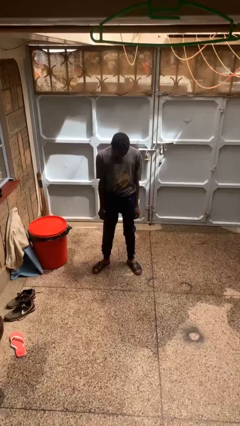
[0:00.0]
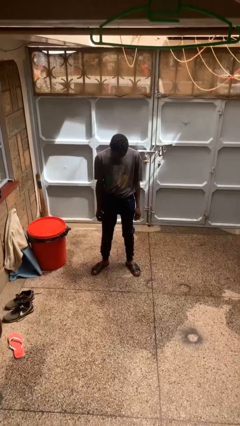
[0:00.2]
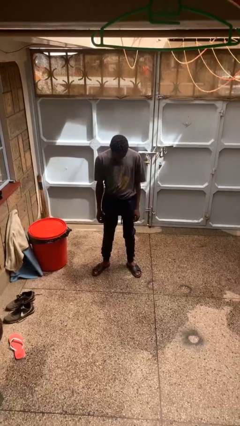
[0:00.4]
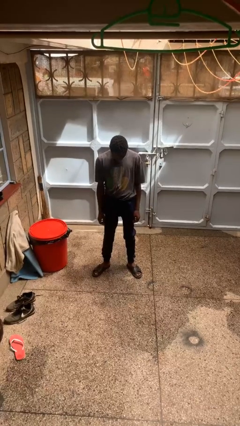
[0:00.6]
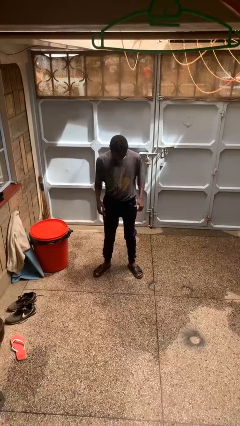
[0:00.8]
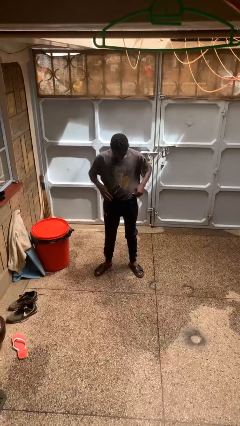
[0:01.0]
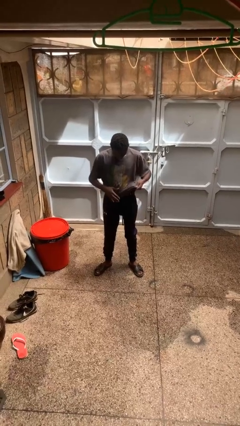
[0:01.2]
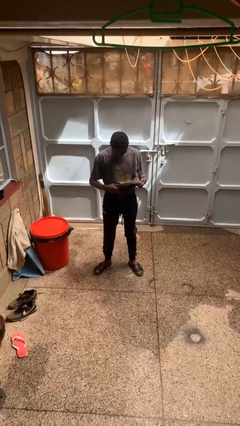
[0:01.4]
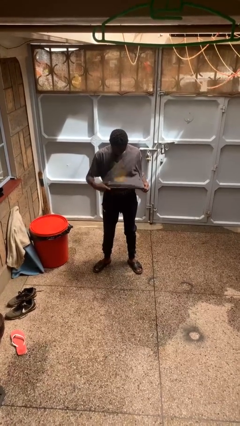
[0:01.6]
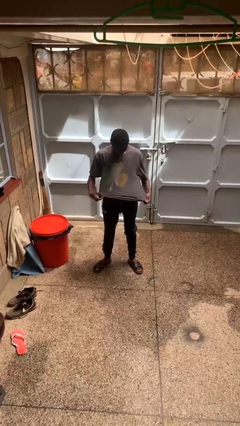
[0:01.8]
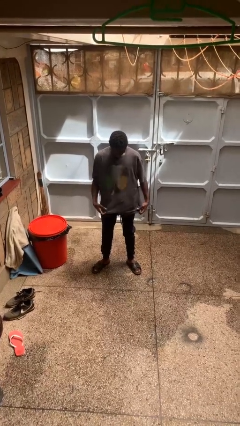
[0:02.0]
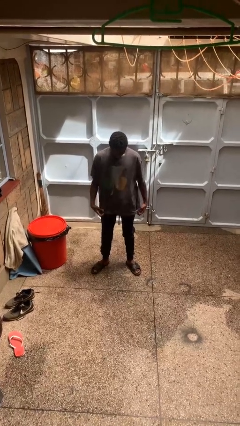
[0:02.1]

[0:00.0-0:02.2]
person untucks shirt

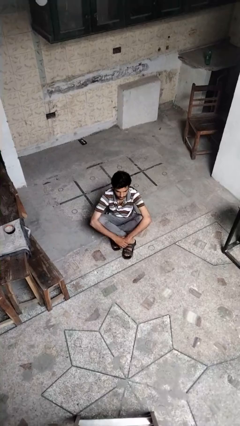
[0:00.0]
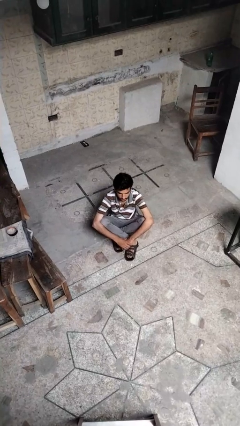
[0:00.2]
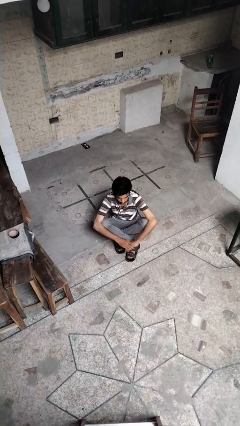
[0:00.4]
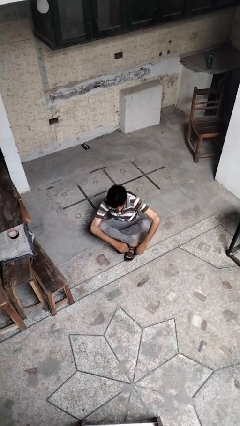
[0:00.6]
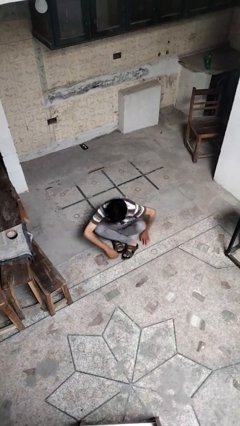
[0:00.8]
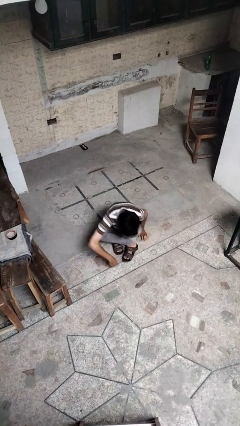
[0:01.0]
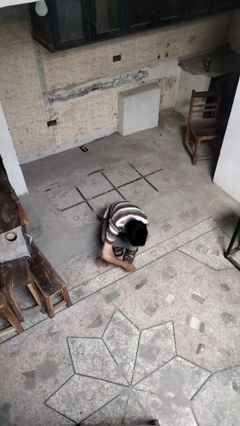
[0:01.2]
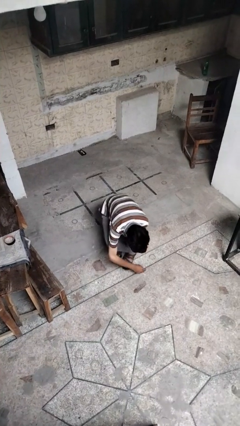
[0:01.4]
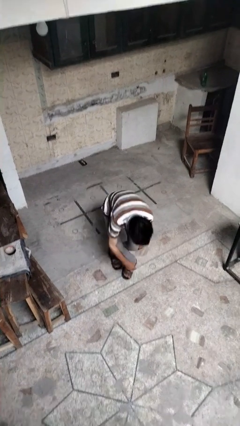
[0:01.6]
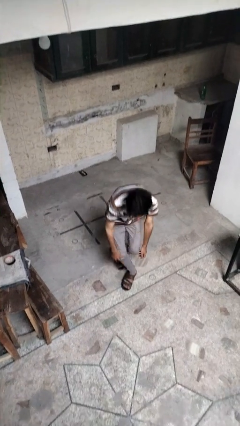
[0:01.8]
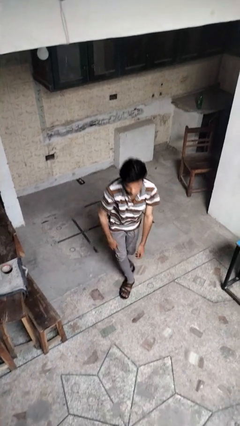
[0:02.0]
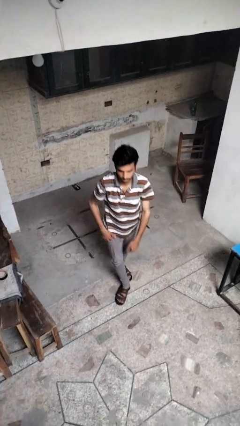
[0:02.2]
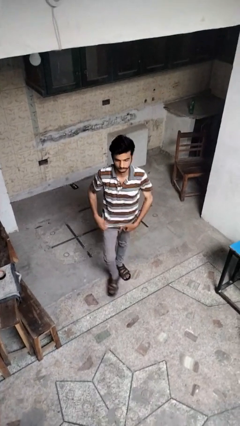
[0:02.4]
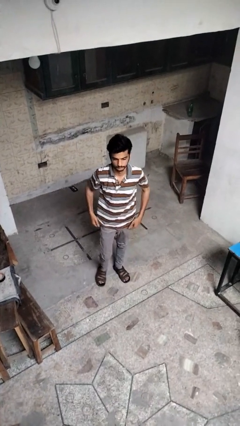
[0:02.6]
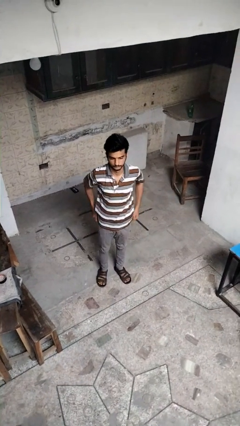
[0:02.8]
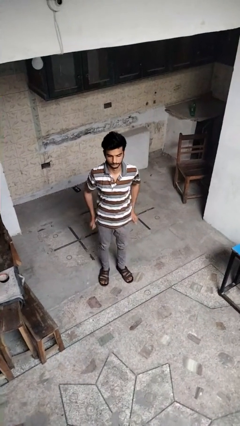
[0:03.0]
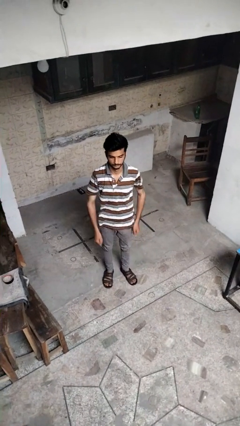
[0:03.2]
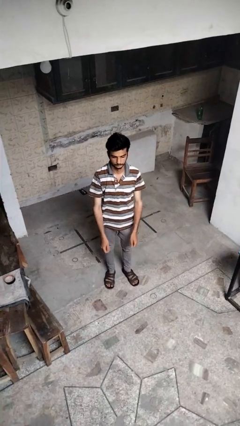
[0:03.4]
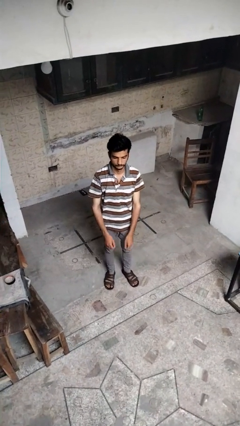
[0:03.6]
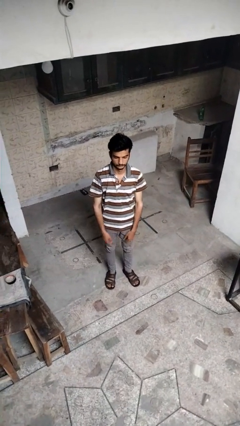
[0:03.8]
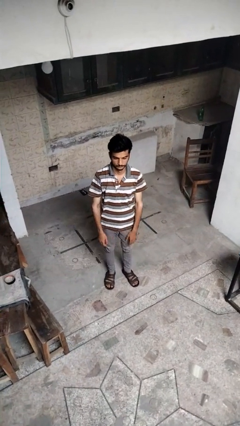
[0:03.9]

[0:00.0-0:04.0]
person stands up from floor

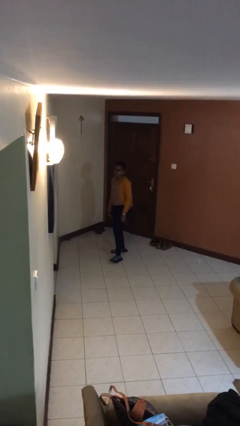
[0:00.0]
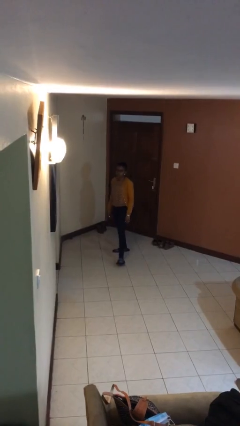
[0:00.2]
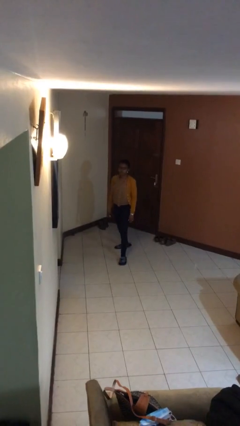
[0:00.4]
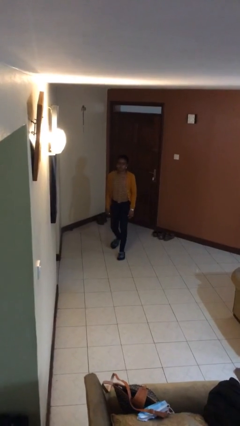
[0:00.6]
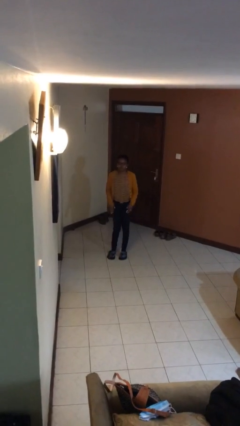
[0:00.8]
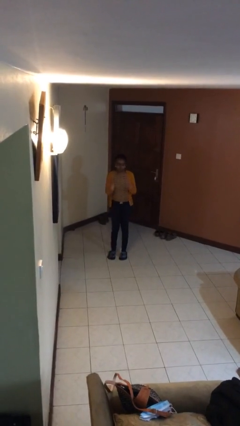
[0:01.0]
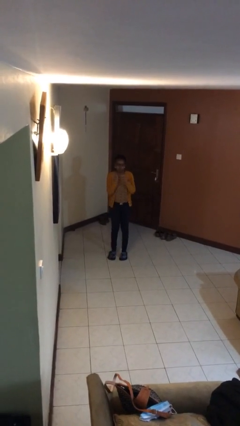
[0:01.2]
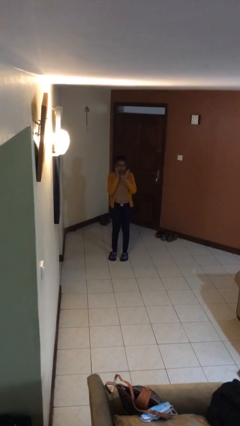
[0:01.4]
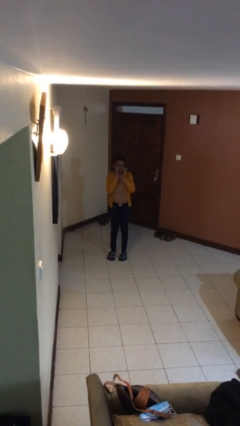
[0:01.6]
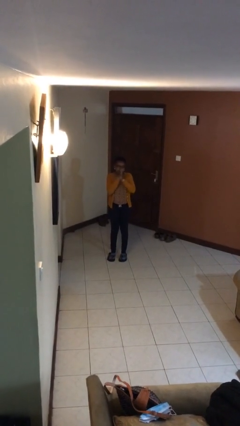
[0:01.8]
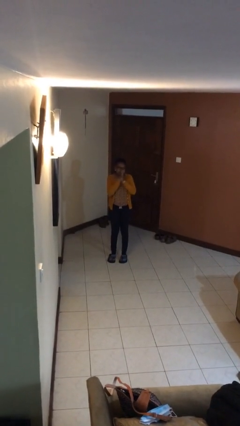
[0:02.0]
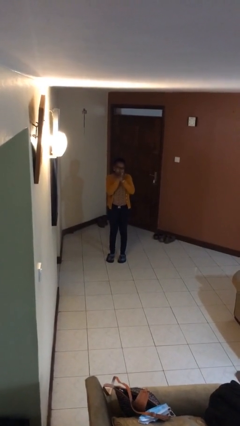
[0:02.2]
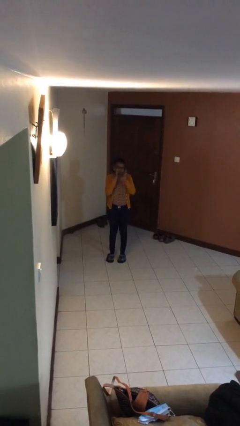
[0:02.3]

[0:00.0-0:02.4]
person claps hands

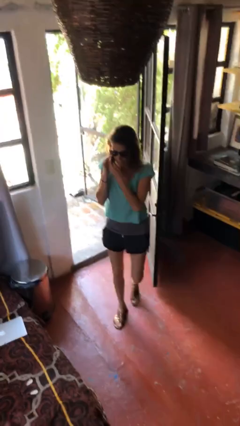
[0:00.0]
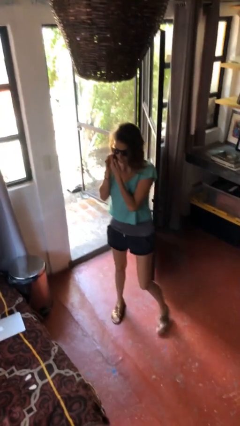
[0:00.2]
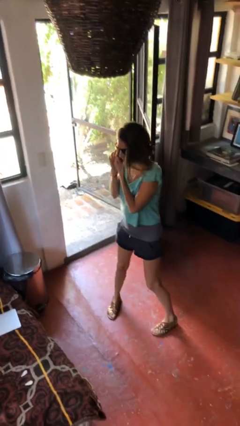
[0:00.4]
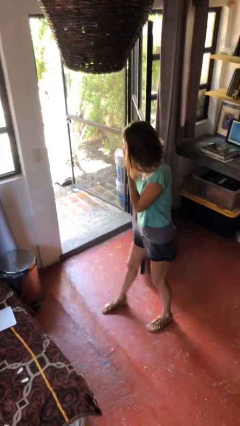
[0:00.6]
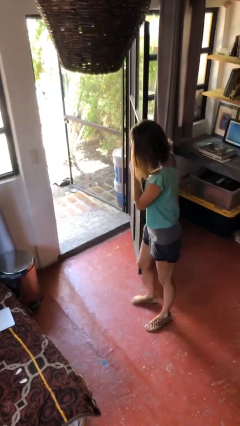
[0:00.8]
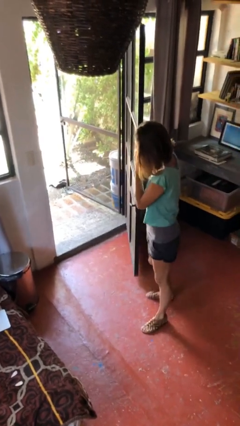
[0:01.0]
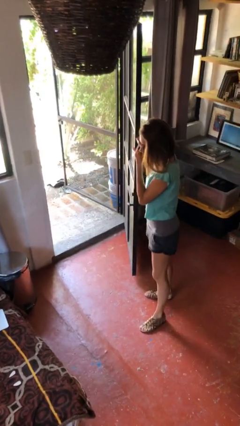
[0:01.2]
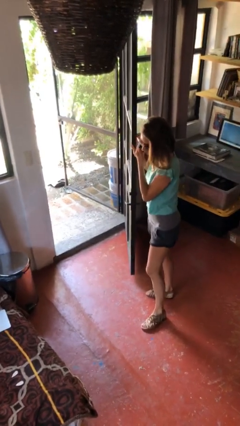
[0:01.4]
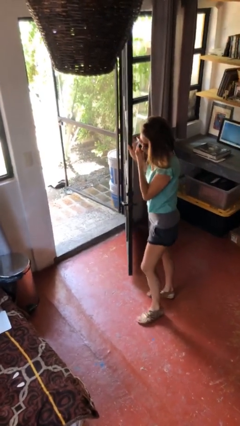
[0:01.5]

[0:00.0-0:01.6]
person closes facility door

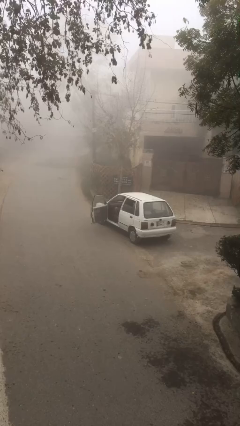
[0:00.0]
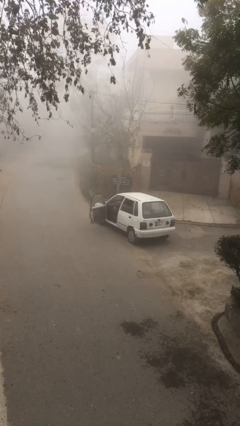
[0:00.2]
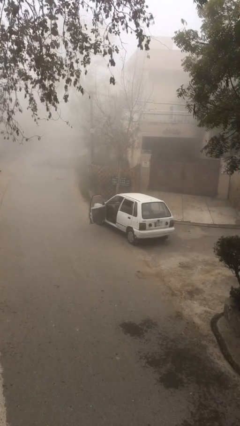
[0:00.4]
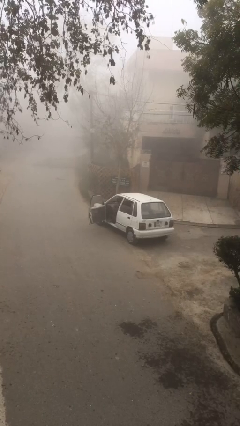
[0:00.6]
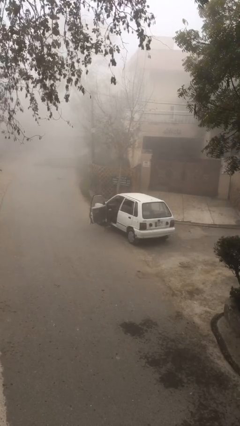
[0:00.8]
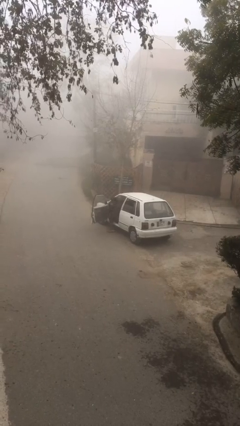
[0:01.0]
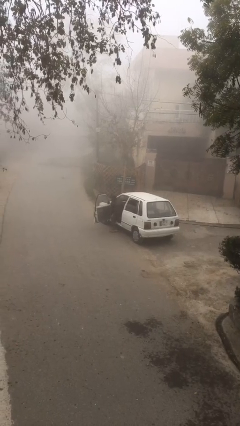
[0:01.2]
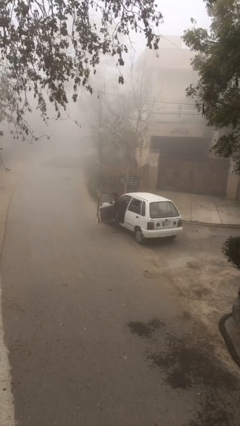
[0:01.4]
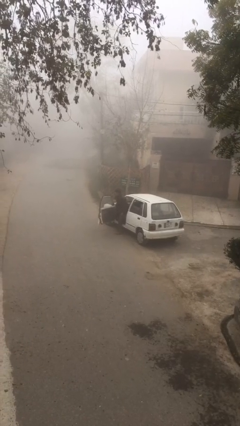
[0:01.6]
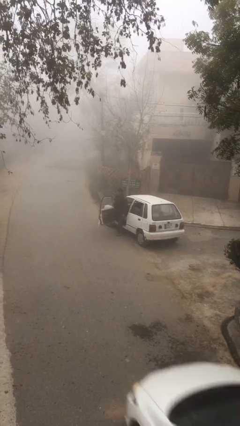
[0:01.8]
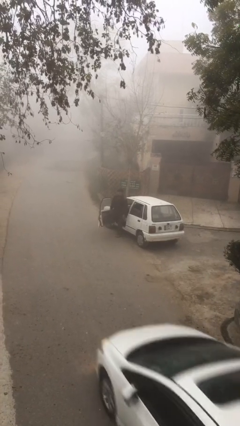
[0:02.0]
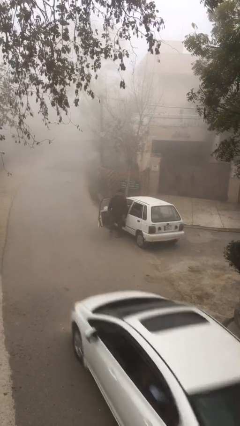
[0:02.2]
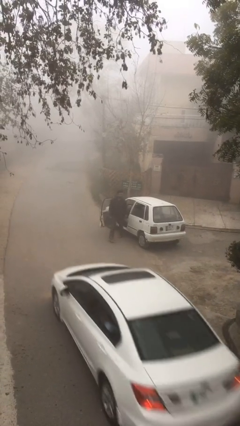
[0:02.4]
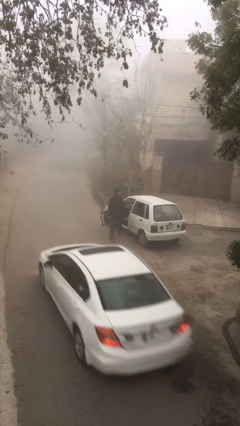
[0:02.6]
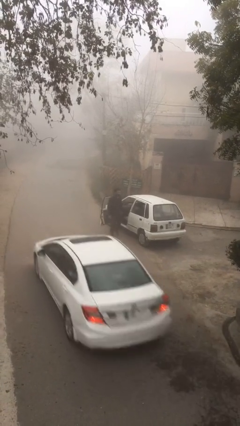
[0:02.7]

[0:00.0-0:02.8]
person exits car

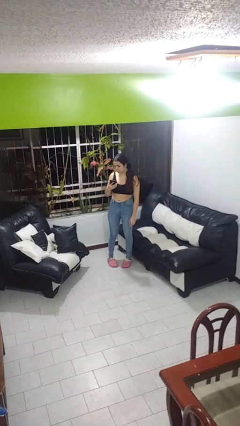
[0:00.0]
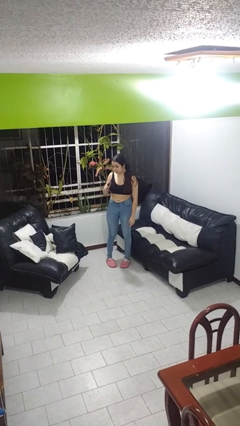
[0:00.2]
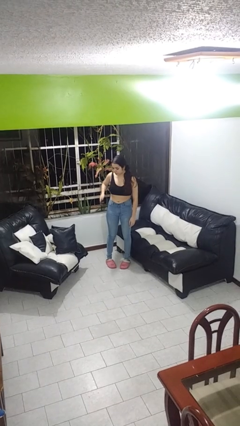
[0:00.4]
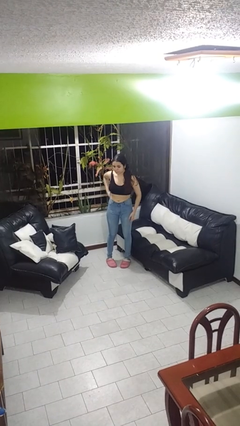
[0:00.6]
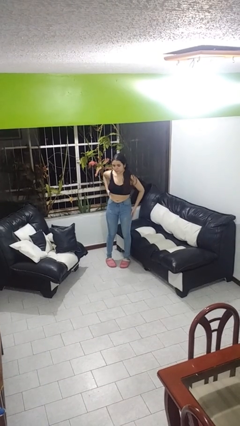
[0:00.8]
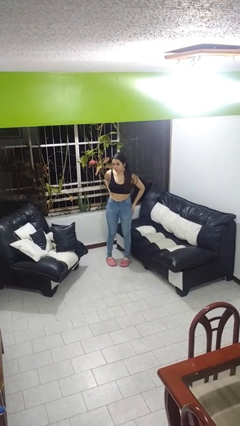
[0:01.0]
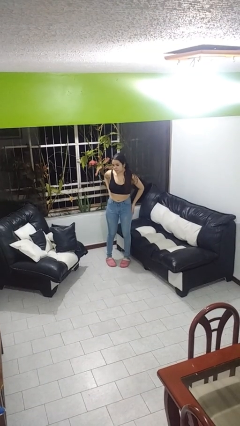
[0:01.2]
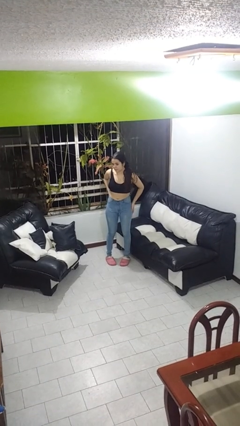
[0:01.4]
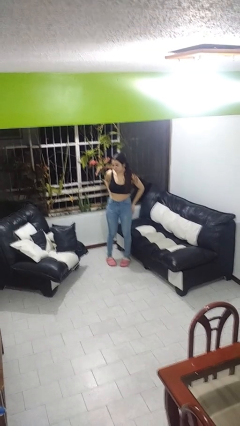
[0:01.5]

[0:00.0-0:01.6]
person puts phone into pocket

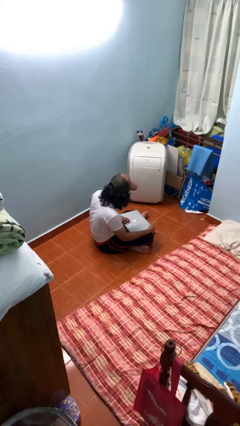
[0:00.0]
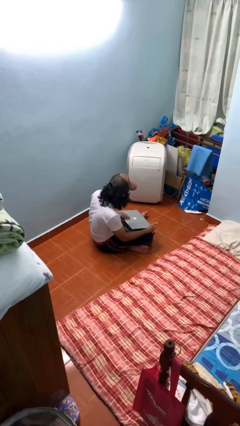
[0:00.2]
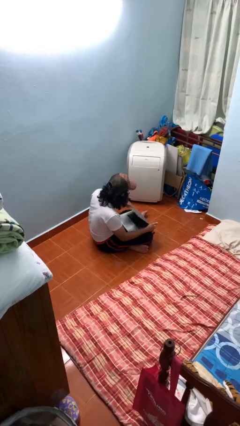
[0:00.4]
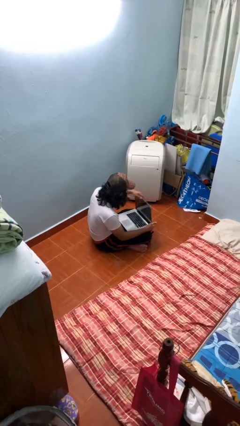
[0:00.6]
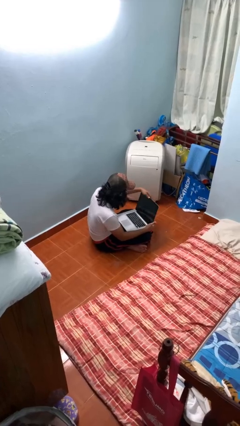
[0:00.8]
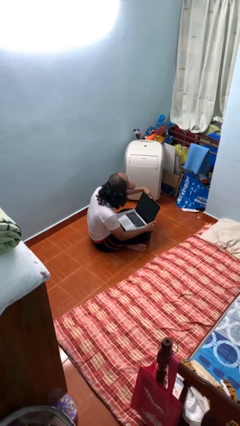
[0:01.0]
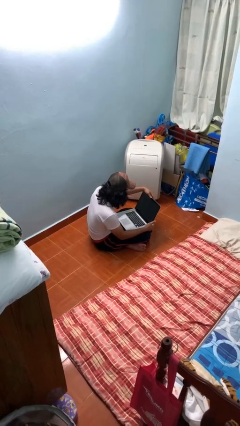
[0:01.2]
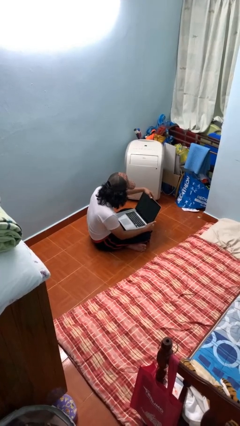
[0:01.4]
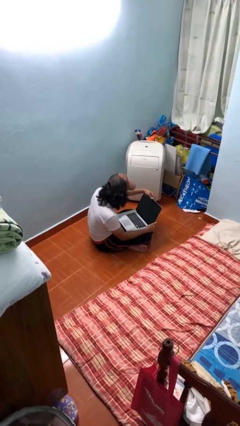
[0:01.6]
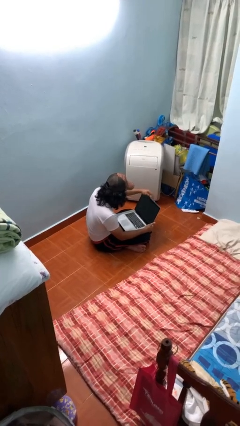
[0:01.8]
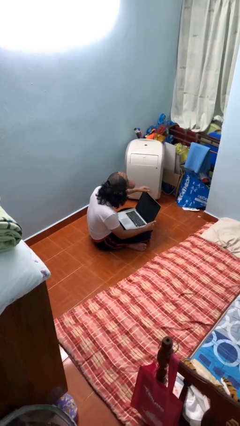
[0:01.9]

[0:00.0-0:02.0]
person opens laptop

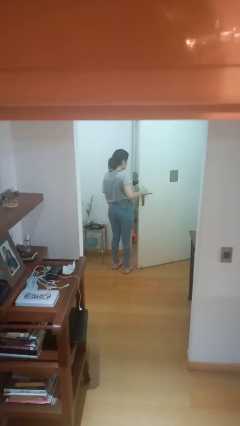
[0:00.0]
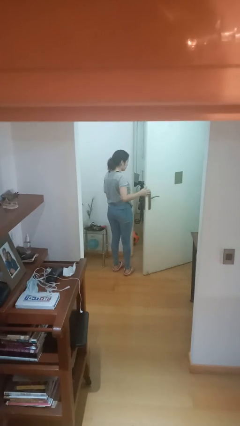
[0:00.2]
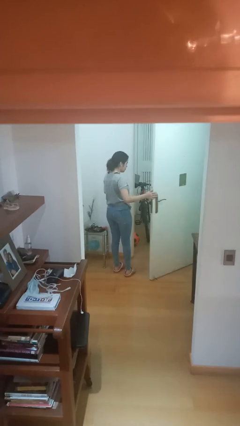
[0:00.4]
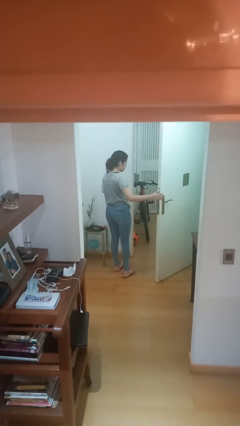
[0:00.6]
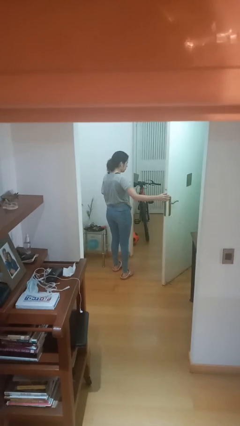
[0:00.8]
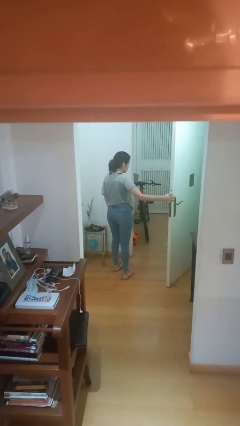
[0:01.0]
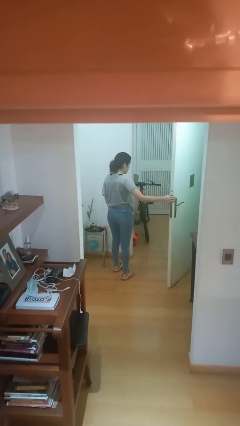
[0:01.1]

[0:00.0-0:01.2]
person opens facility door
